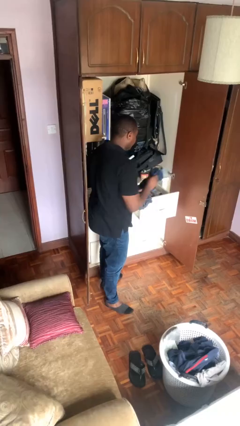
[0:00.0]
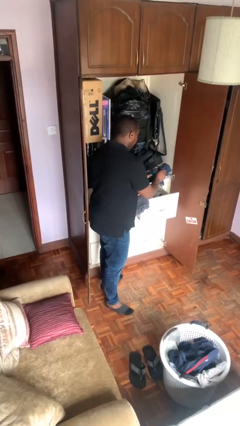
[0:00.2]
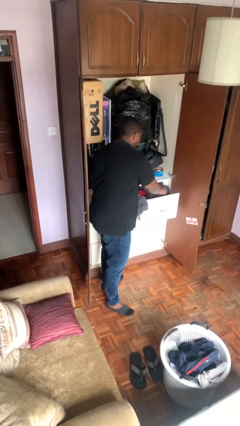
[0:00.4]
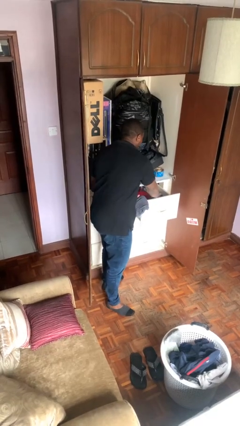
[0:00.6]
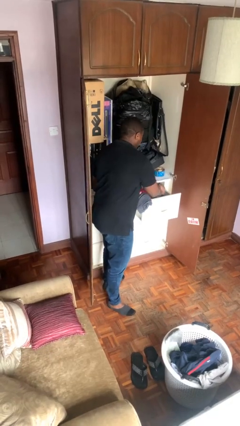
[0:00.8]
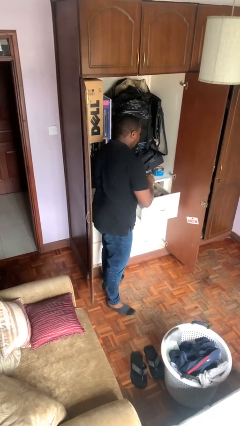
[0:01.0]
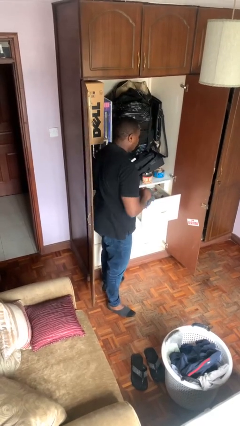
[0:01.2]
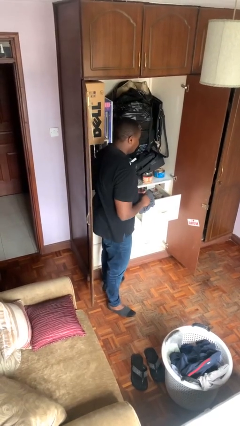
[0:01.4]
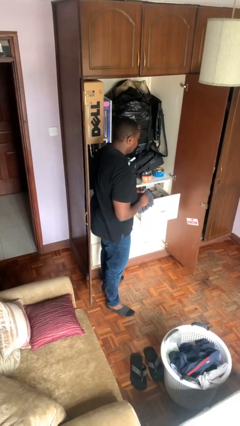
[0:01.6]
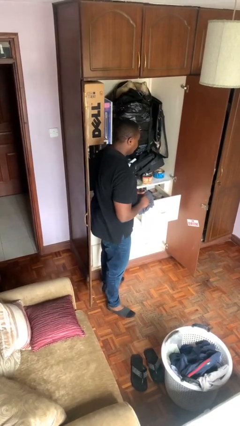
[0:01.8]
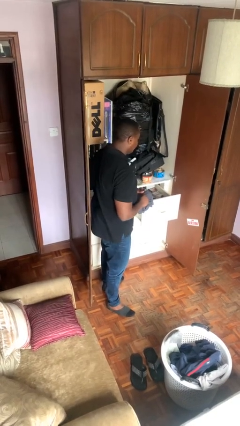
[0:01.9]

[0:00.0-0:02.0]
person puts clothes into dresser

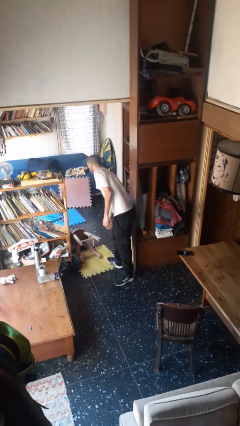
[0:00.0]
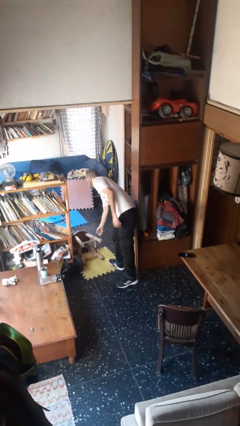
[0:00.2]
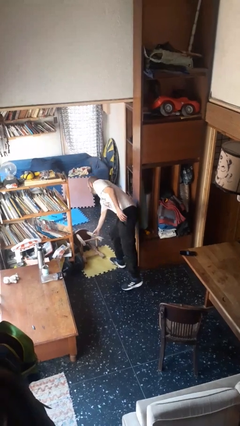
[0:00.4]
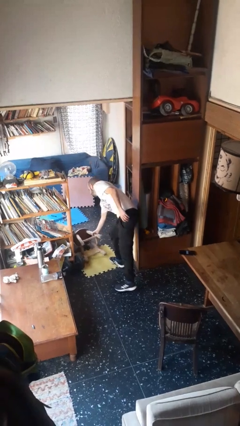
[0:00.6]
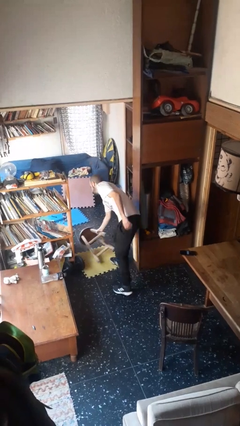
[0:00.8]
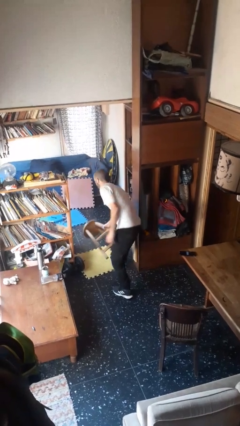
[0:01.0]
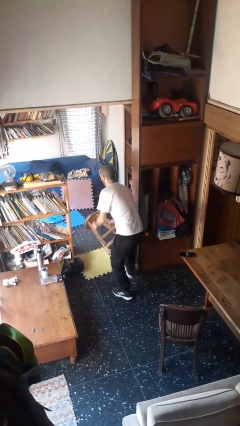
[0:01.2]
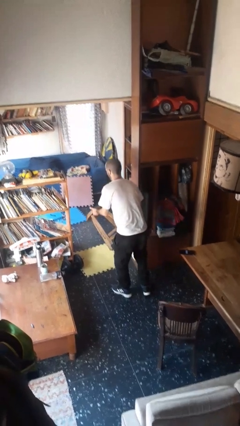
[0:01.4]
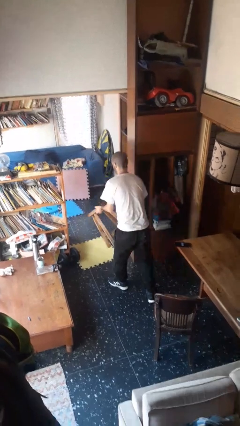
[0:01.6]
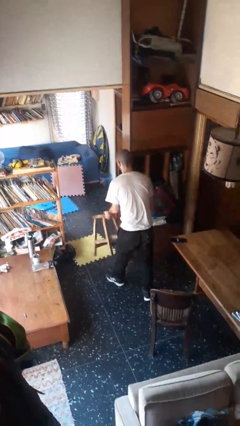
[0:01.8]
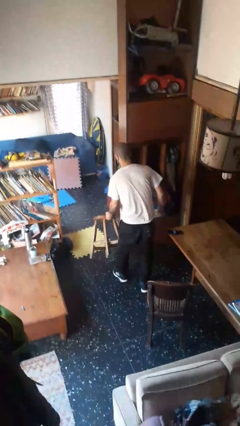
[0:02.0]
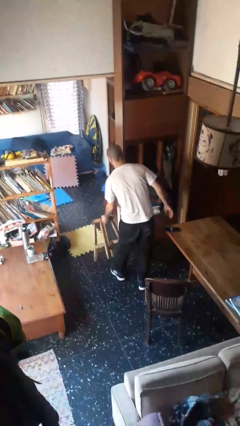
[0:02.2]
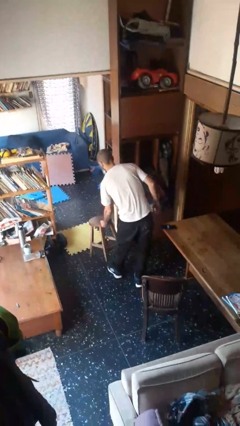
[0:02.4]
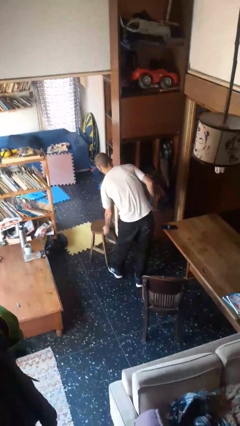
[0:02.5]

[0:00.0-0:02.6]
person sets upright furniture

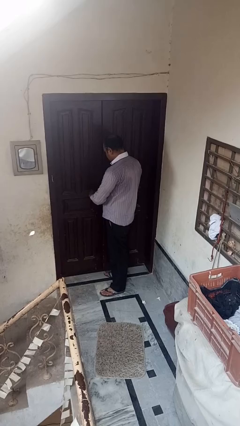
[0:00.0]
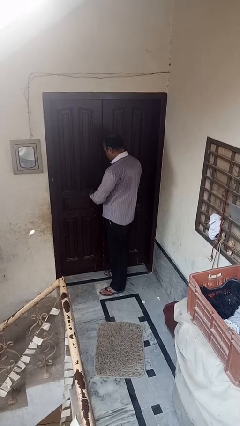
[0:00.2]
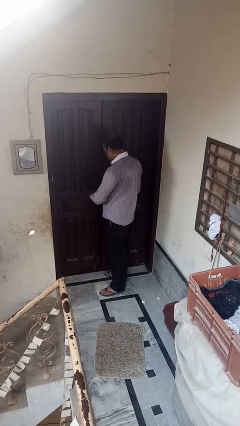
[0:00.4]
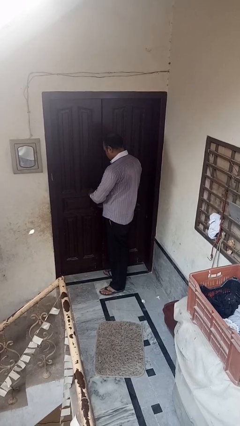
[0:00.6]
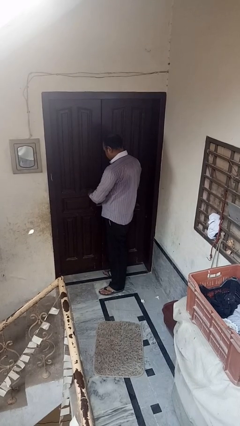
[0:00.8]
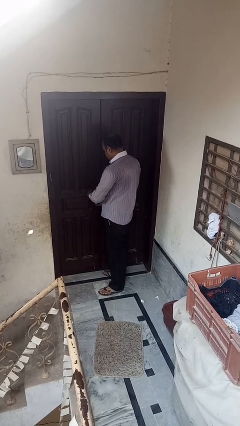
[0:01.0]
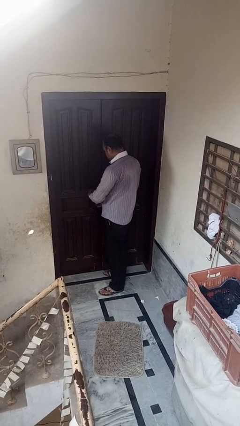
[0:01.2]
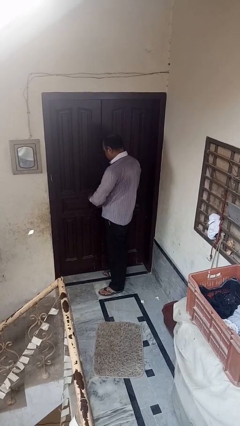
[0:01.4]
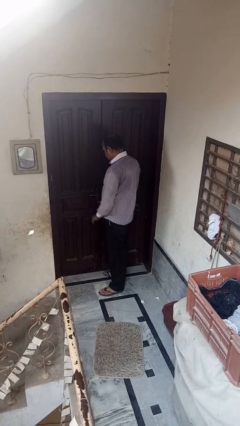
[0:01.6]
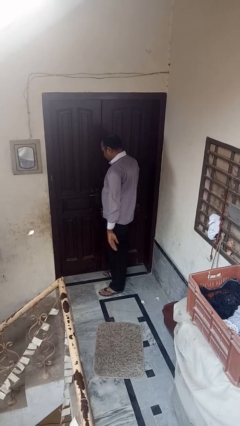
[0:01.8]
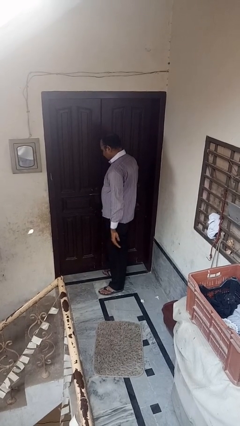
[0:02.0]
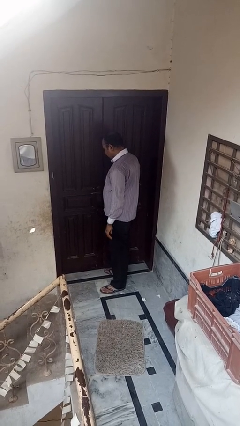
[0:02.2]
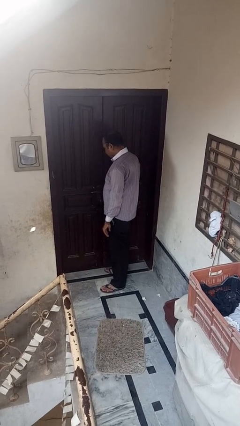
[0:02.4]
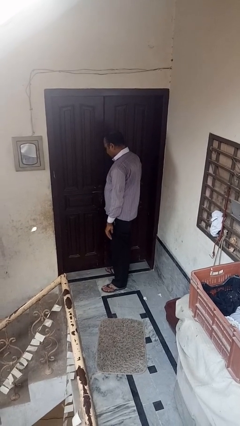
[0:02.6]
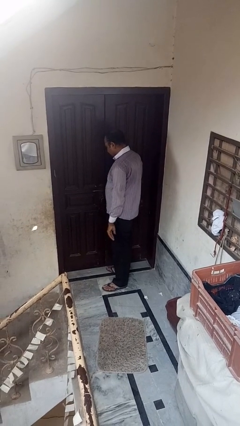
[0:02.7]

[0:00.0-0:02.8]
person locks door with keys

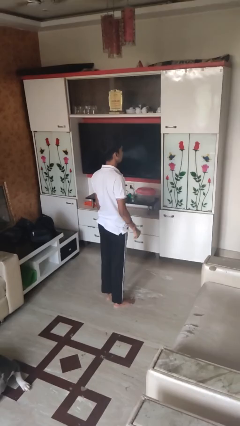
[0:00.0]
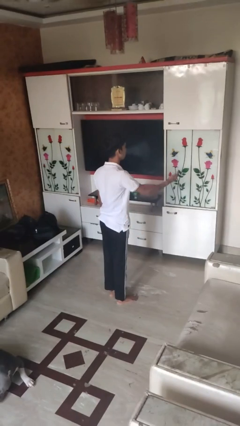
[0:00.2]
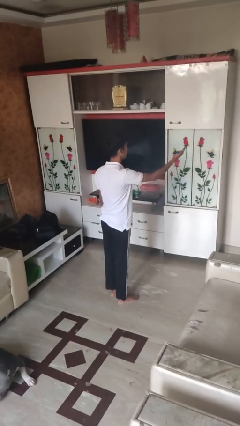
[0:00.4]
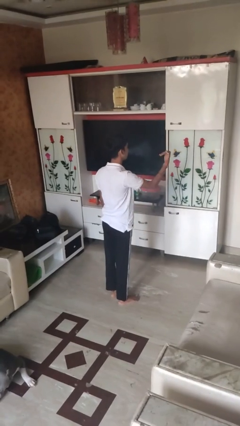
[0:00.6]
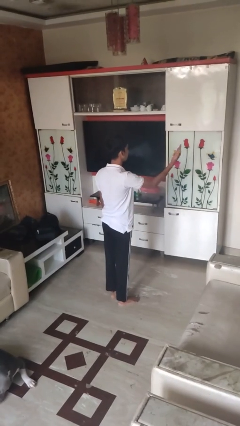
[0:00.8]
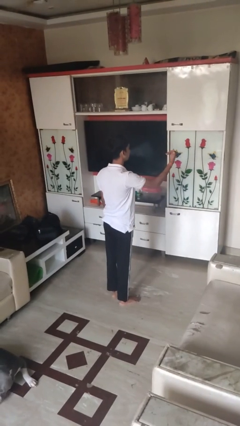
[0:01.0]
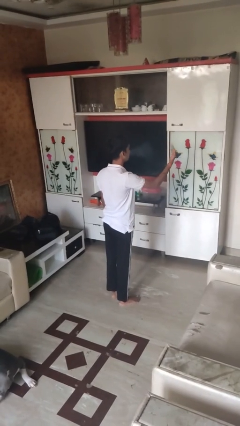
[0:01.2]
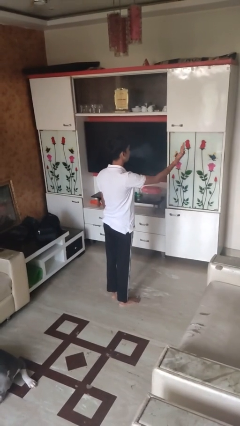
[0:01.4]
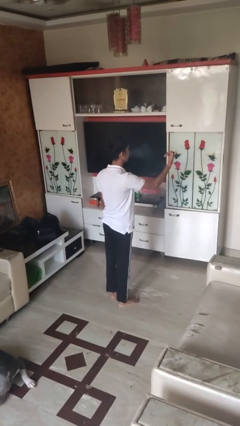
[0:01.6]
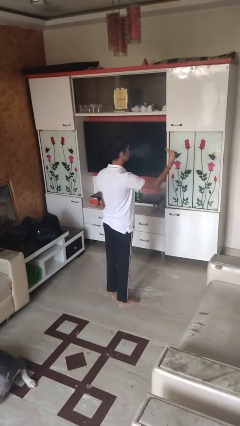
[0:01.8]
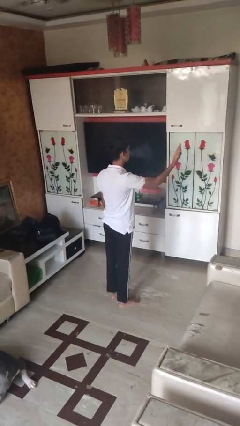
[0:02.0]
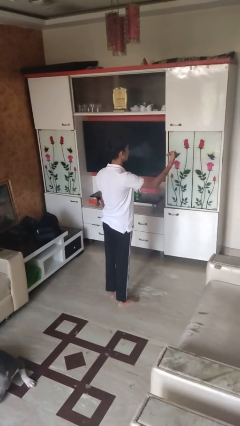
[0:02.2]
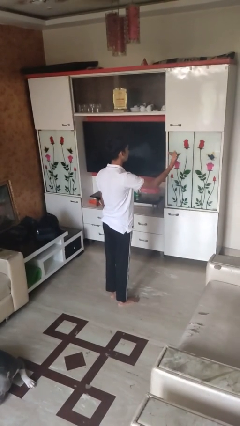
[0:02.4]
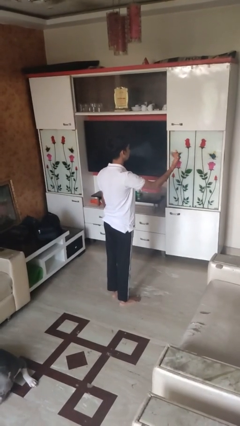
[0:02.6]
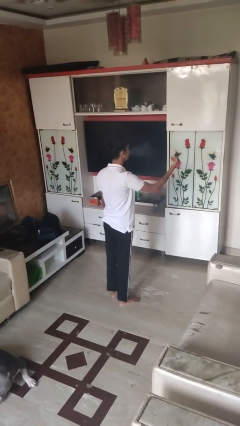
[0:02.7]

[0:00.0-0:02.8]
person gestures come here

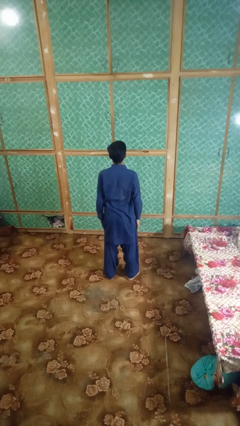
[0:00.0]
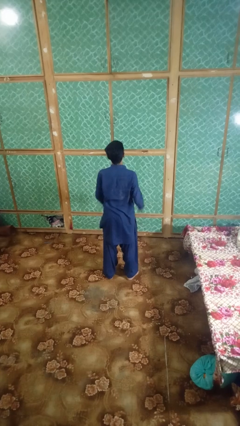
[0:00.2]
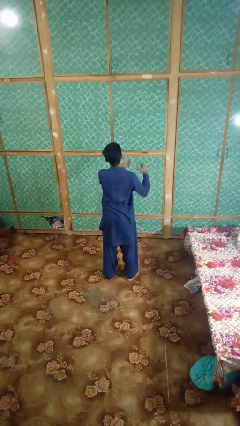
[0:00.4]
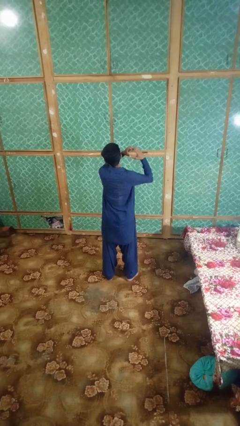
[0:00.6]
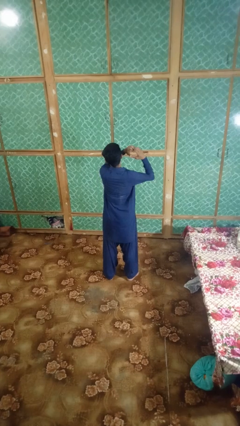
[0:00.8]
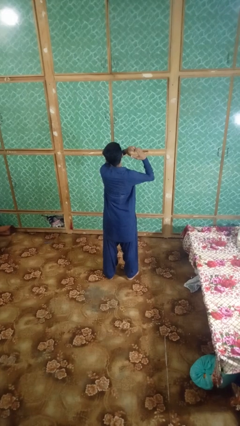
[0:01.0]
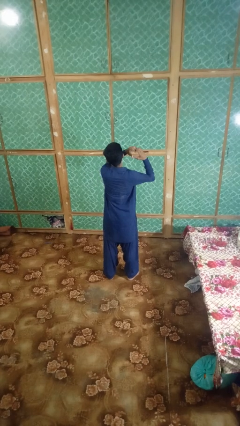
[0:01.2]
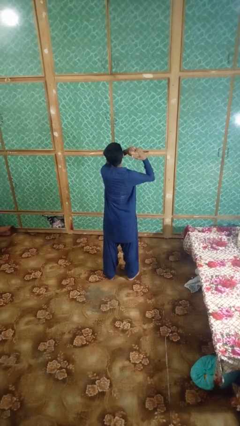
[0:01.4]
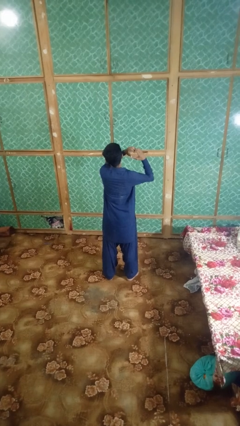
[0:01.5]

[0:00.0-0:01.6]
person gestures heart

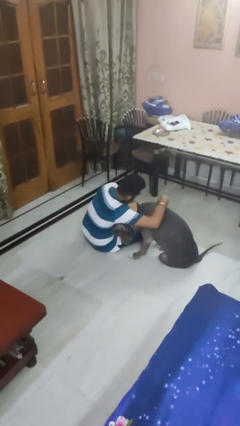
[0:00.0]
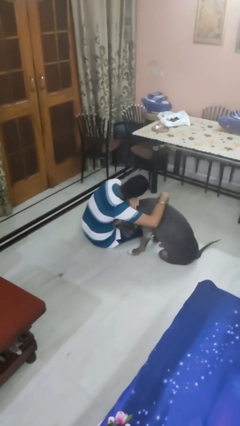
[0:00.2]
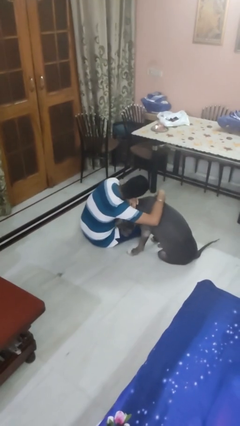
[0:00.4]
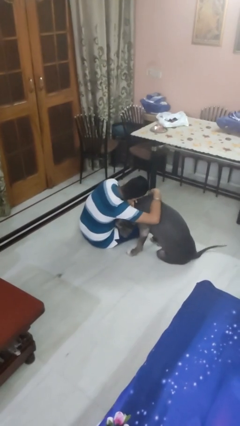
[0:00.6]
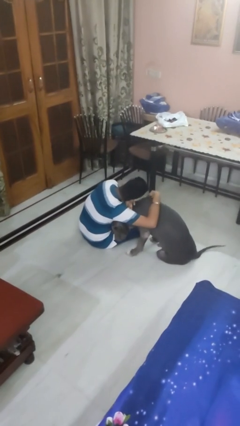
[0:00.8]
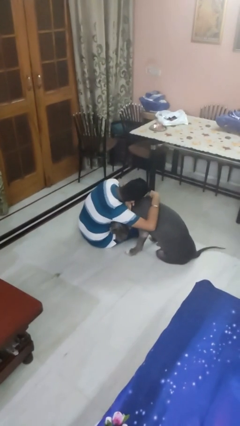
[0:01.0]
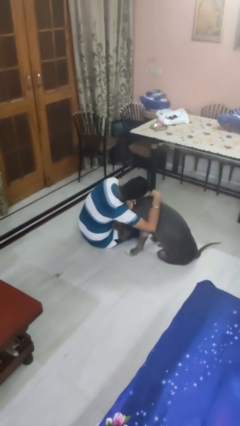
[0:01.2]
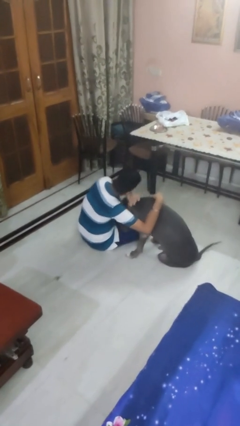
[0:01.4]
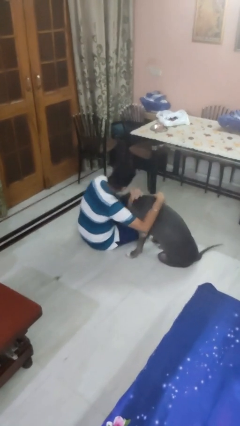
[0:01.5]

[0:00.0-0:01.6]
person hugs dog

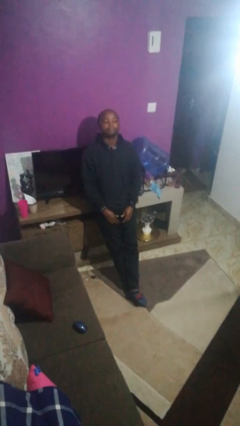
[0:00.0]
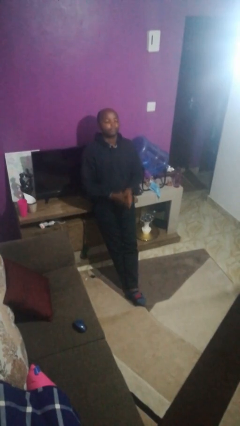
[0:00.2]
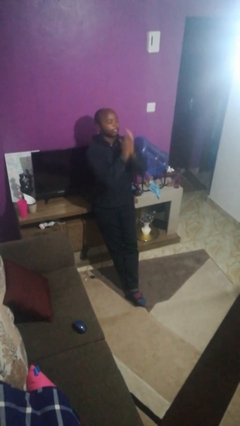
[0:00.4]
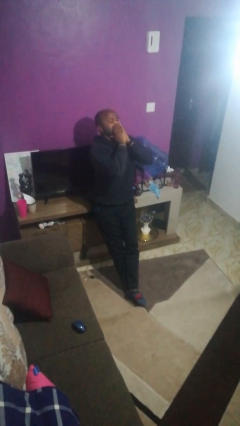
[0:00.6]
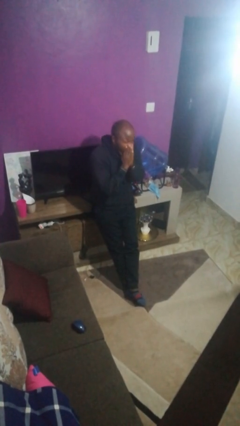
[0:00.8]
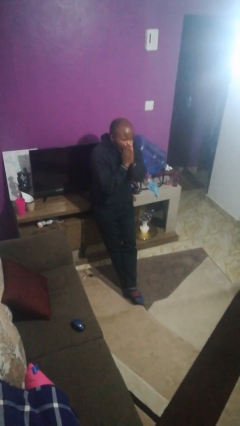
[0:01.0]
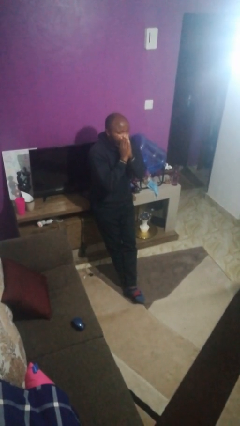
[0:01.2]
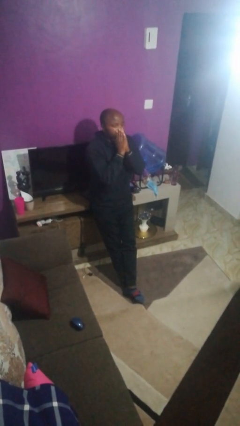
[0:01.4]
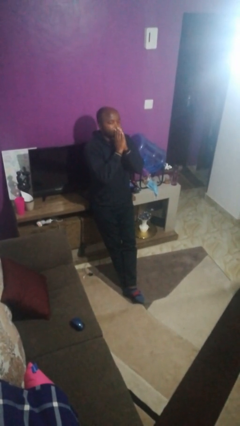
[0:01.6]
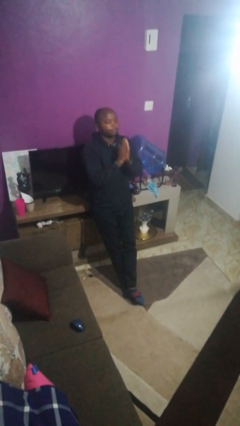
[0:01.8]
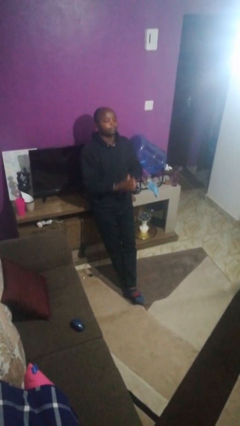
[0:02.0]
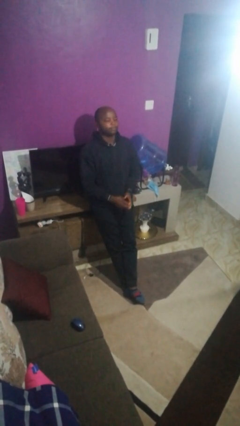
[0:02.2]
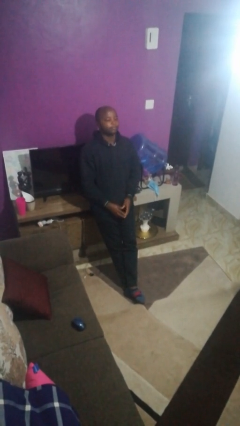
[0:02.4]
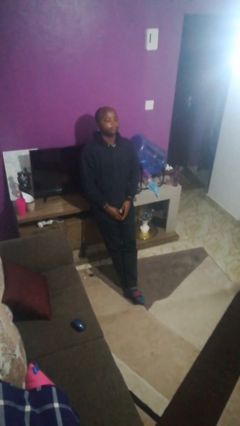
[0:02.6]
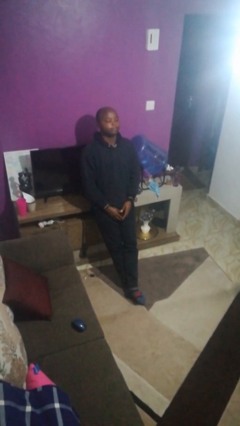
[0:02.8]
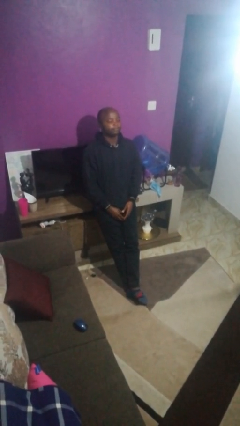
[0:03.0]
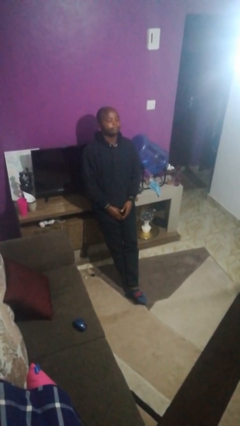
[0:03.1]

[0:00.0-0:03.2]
person sneezes into hand

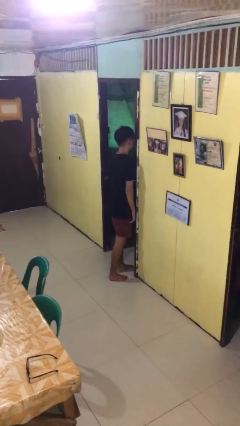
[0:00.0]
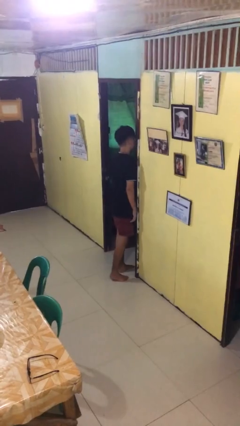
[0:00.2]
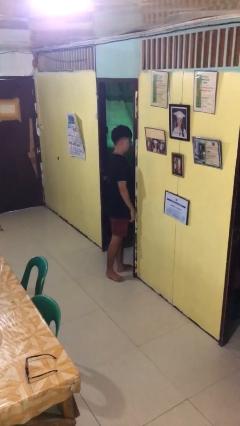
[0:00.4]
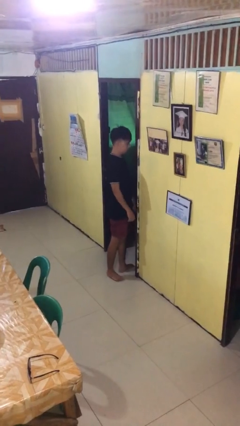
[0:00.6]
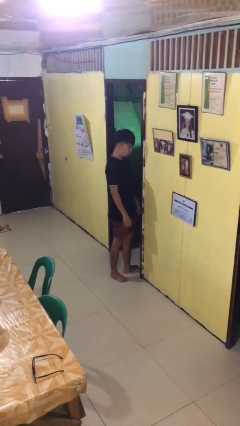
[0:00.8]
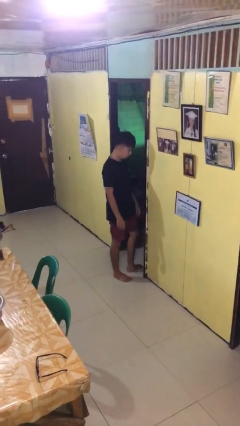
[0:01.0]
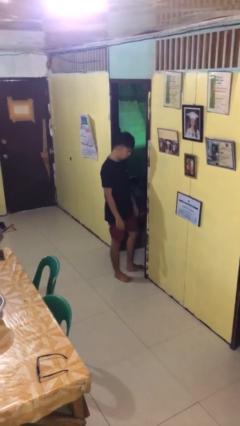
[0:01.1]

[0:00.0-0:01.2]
person bumps into wall
